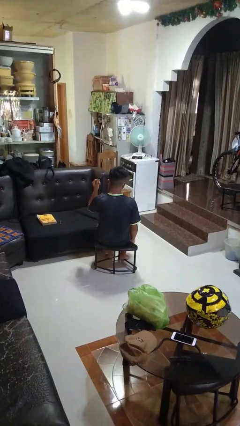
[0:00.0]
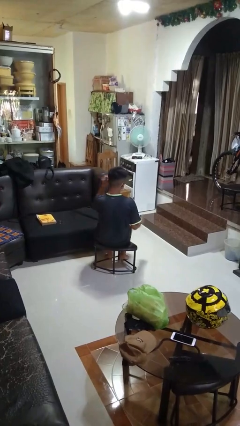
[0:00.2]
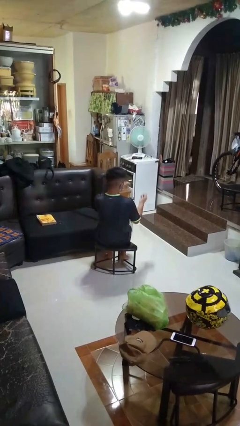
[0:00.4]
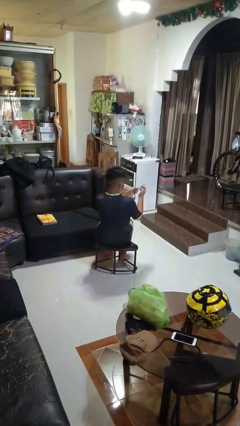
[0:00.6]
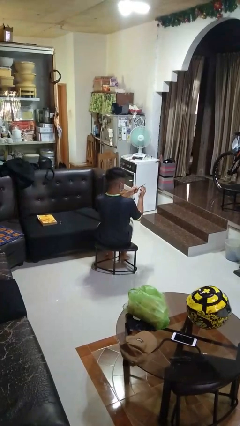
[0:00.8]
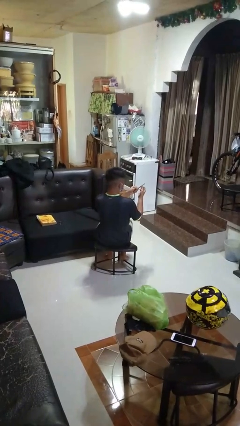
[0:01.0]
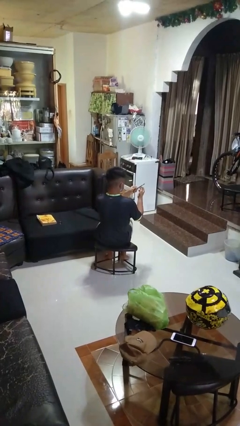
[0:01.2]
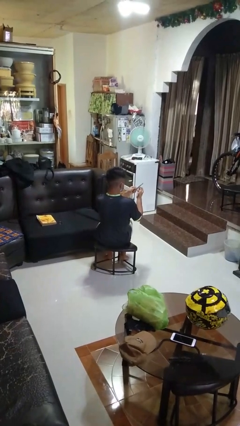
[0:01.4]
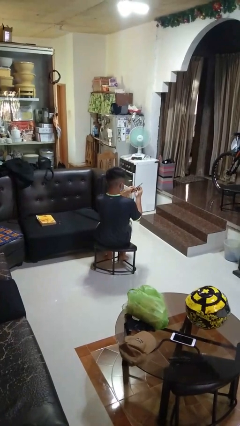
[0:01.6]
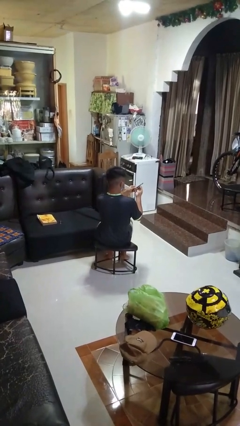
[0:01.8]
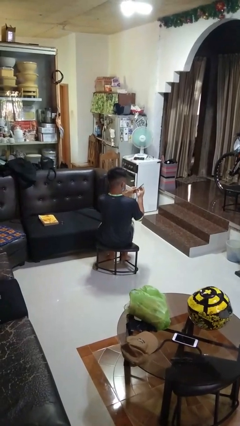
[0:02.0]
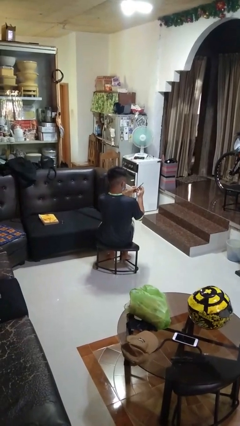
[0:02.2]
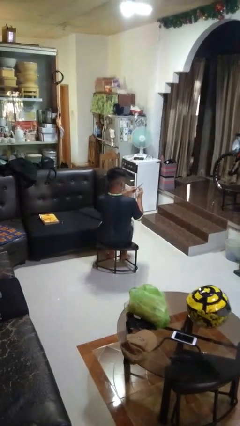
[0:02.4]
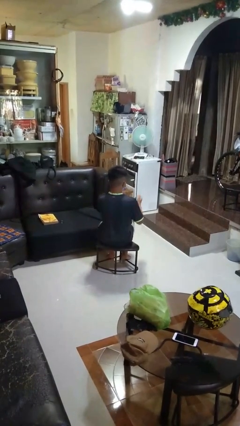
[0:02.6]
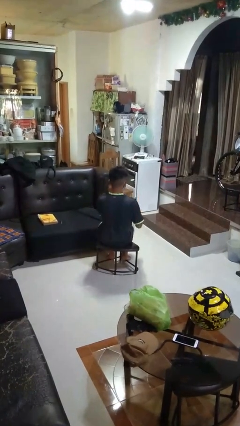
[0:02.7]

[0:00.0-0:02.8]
person files fingernails

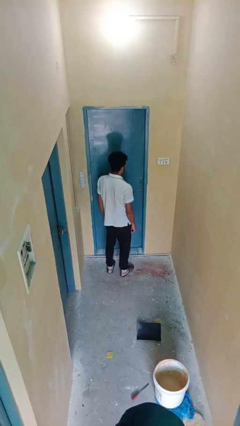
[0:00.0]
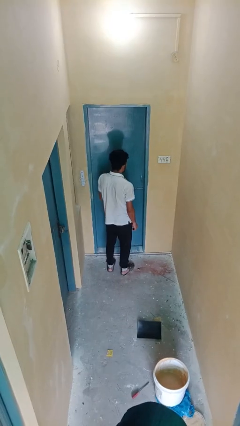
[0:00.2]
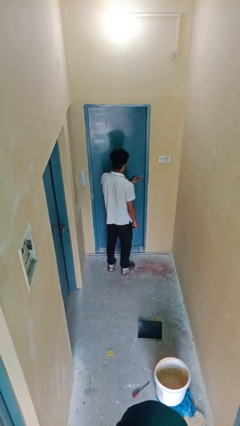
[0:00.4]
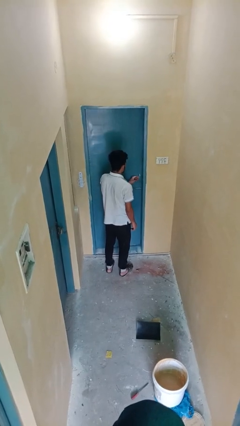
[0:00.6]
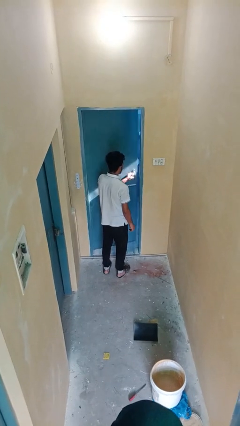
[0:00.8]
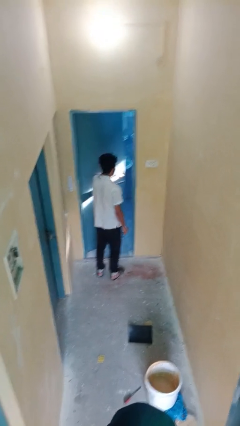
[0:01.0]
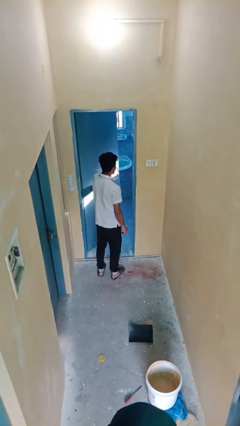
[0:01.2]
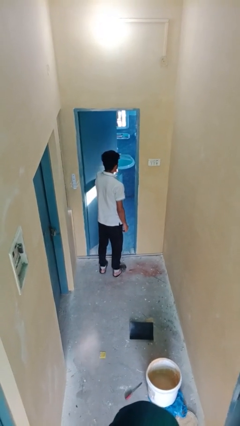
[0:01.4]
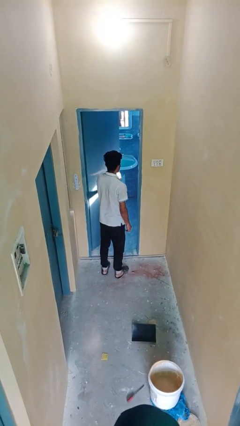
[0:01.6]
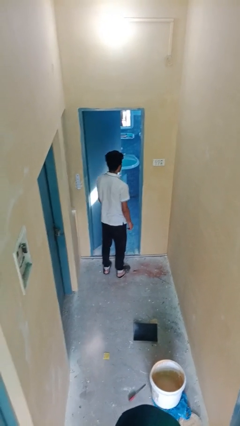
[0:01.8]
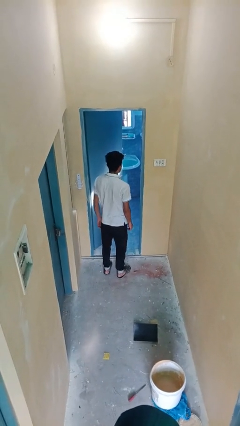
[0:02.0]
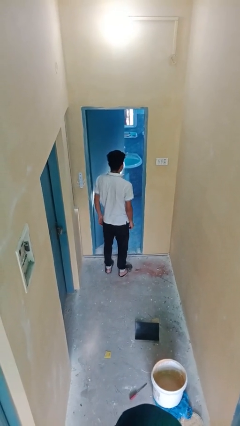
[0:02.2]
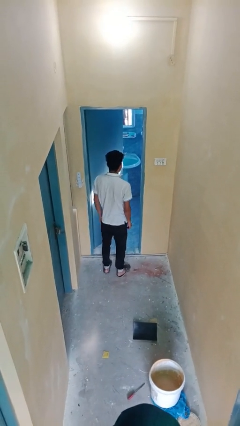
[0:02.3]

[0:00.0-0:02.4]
person opens facility door

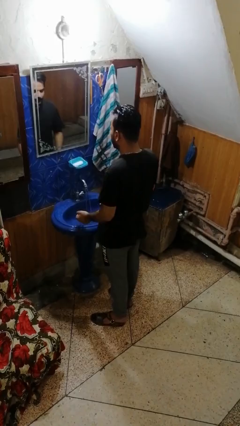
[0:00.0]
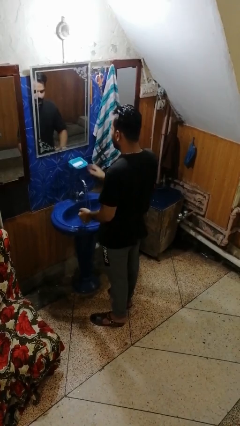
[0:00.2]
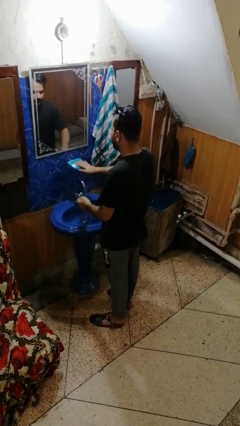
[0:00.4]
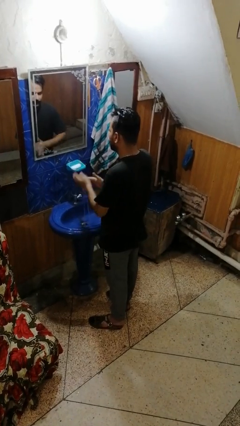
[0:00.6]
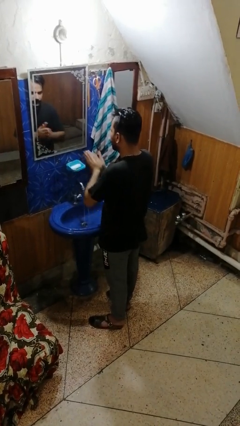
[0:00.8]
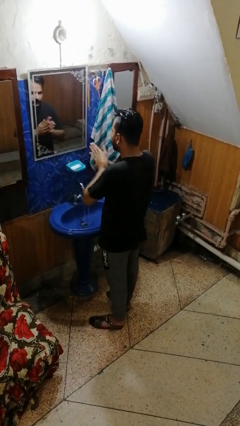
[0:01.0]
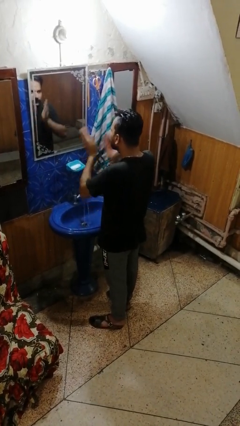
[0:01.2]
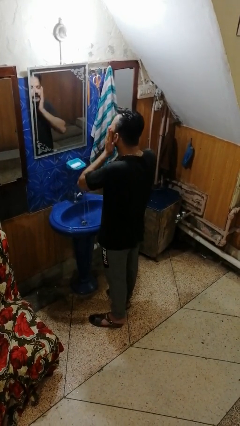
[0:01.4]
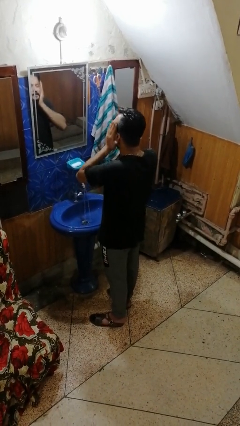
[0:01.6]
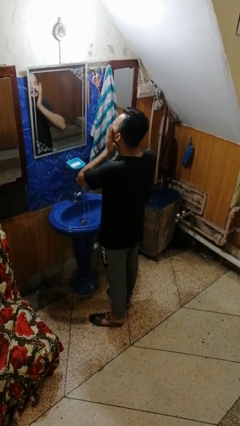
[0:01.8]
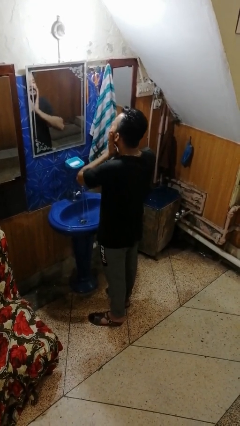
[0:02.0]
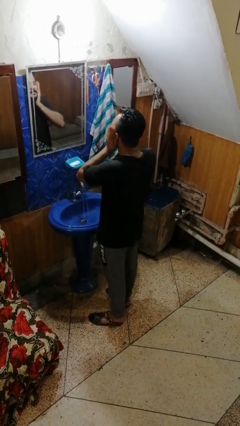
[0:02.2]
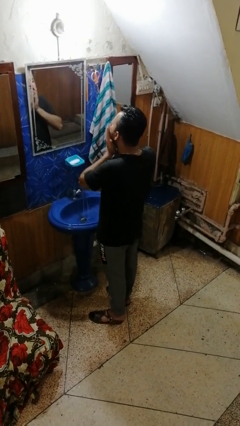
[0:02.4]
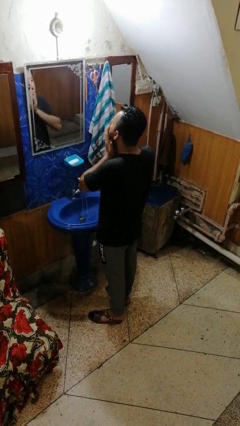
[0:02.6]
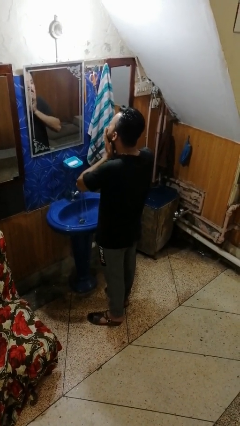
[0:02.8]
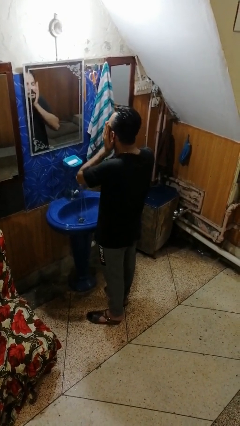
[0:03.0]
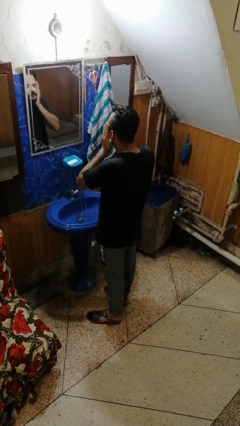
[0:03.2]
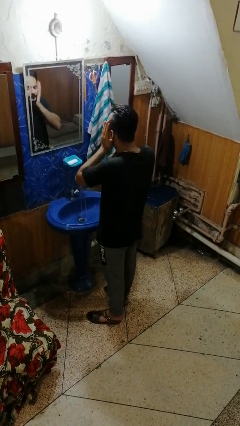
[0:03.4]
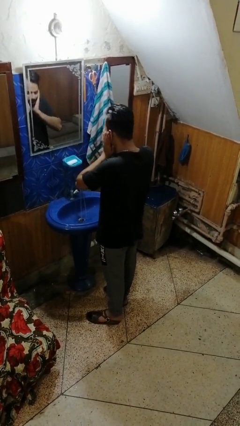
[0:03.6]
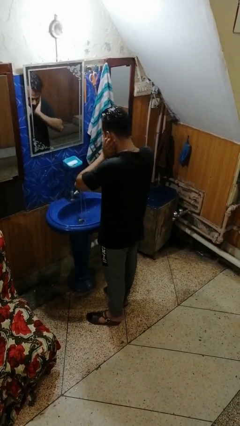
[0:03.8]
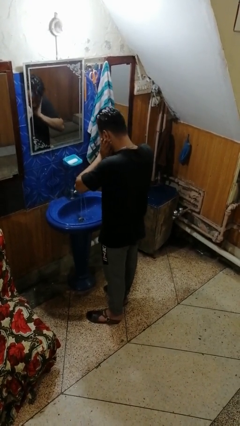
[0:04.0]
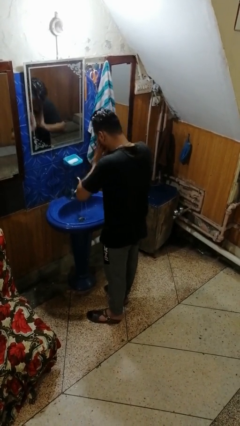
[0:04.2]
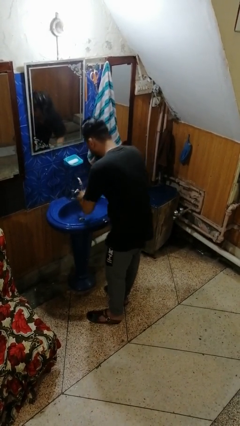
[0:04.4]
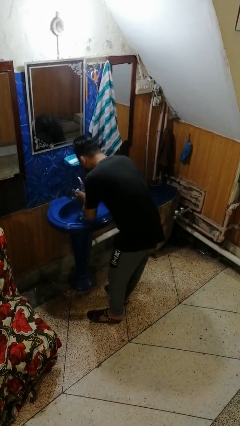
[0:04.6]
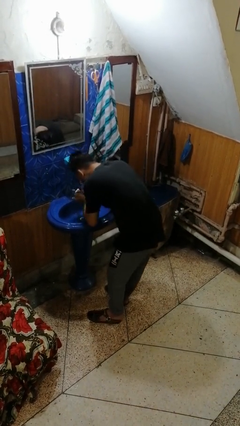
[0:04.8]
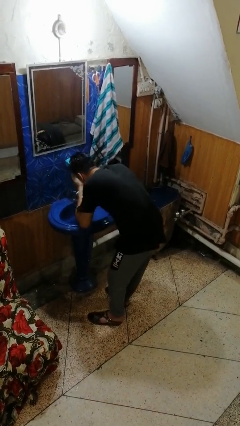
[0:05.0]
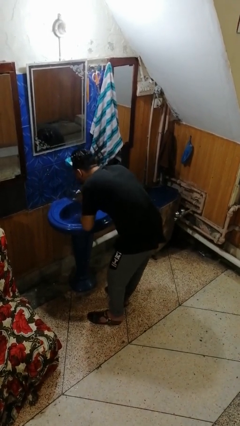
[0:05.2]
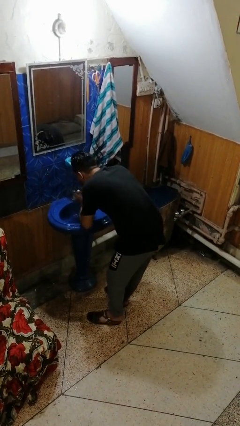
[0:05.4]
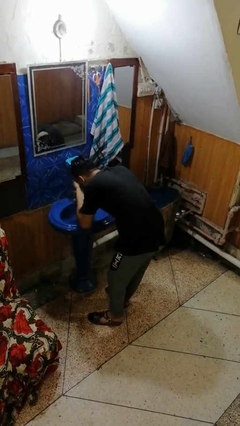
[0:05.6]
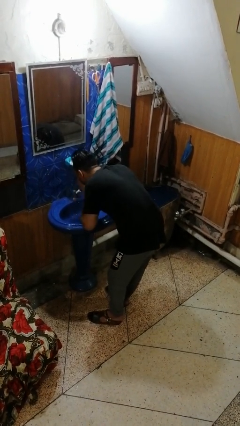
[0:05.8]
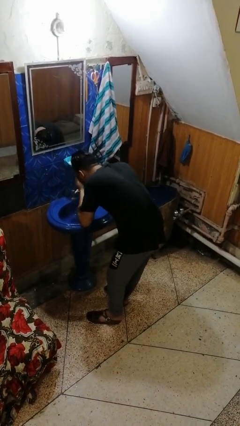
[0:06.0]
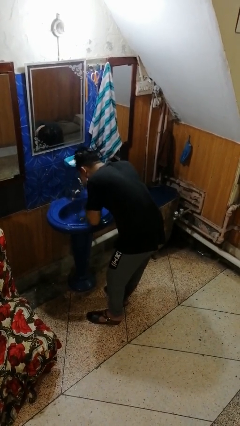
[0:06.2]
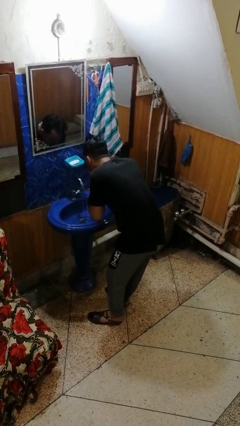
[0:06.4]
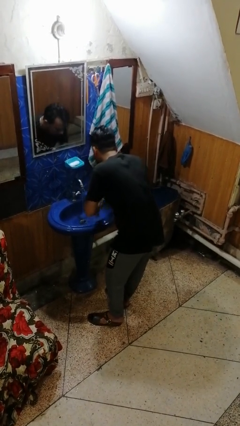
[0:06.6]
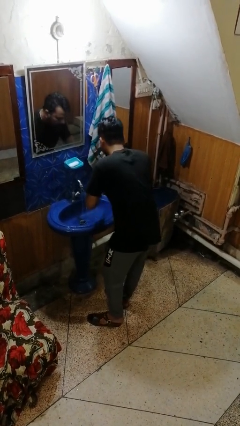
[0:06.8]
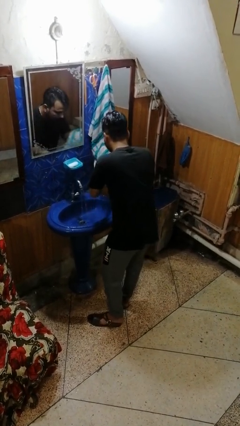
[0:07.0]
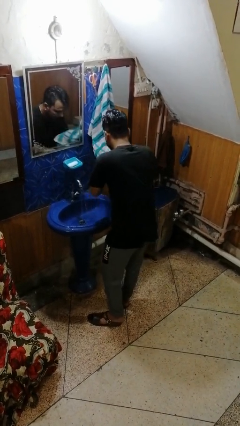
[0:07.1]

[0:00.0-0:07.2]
person washes face

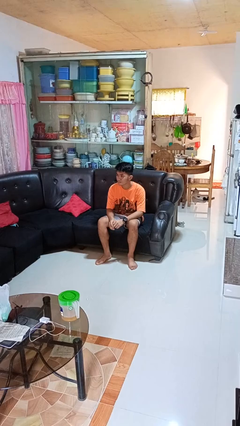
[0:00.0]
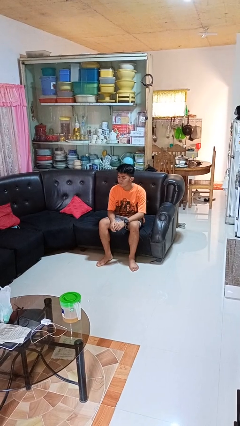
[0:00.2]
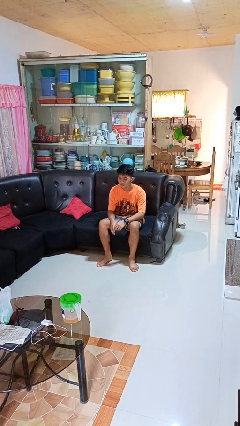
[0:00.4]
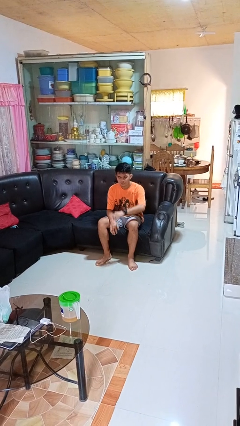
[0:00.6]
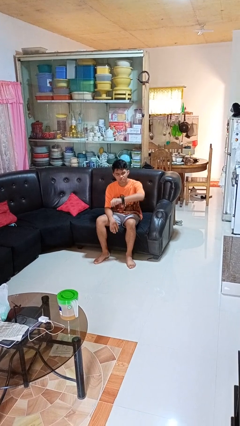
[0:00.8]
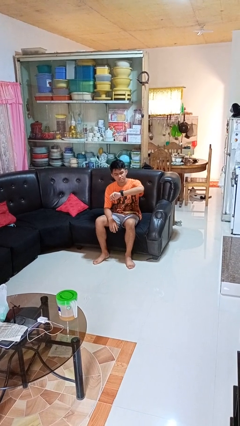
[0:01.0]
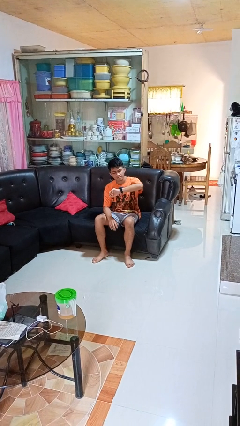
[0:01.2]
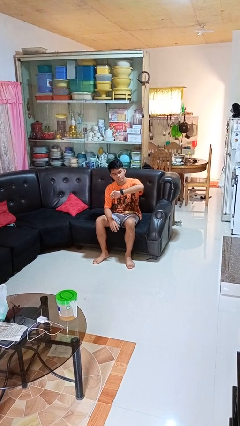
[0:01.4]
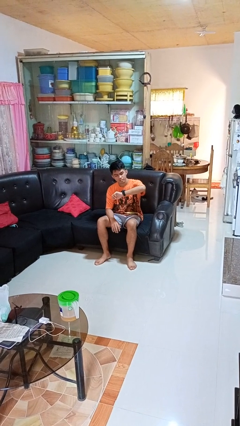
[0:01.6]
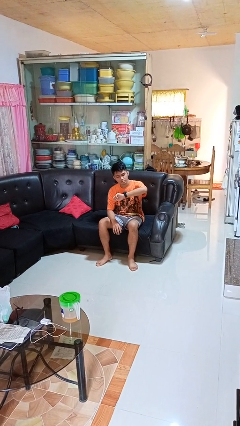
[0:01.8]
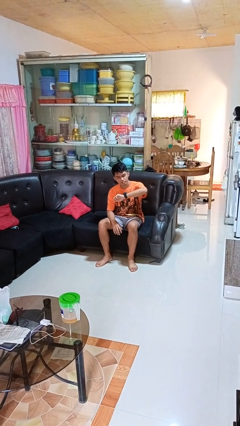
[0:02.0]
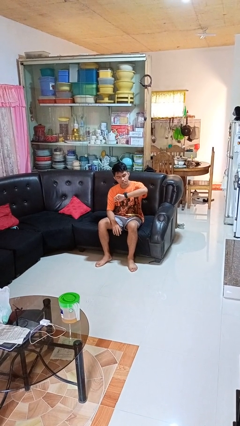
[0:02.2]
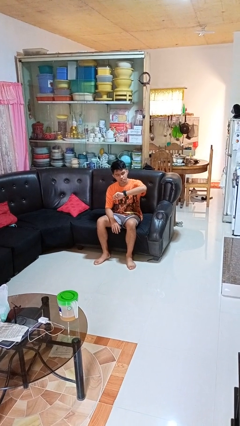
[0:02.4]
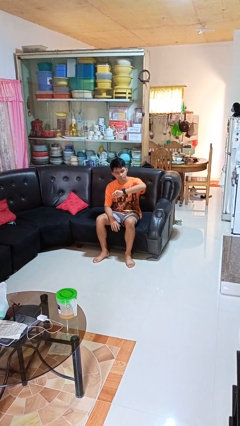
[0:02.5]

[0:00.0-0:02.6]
person looks at wristwatch

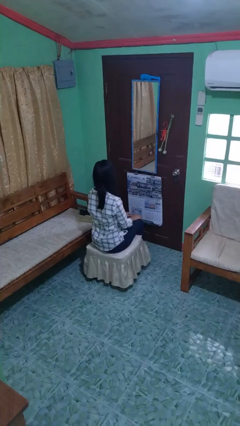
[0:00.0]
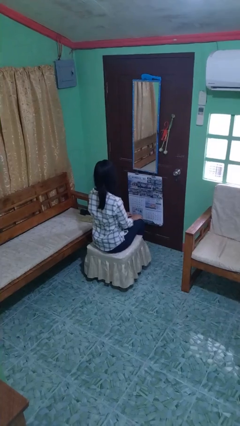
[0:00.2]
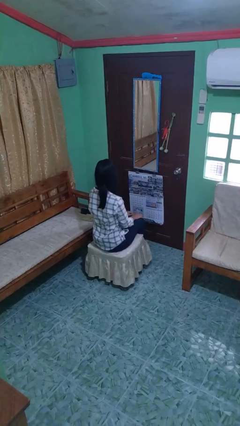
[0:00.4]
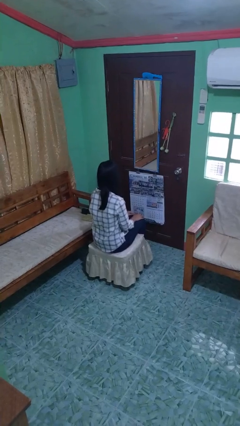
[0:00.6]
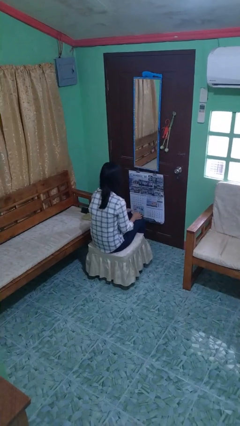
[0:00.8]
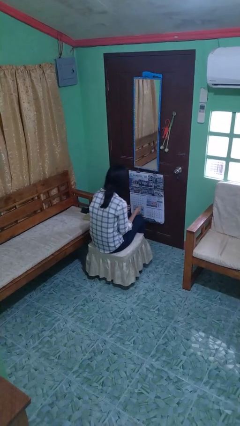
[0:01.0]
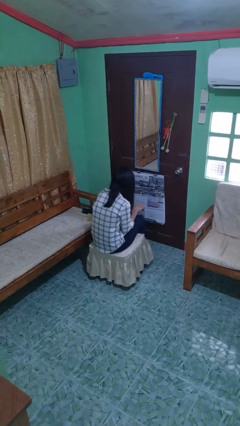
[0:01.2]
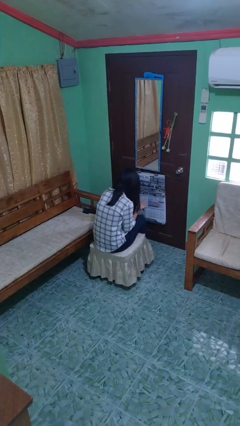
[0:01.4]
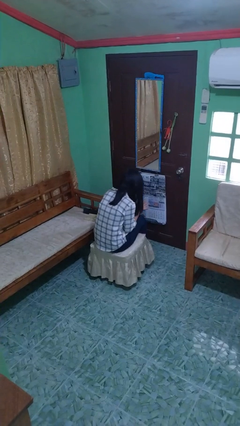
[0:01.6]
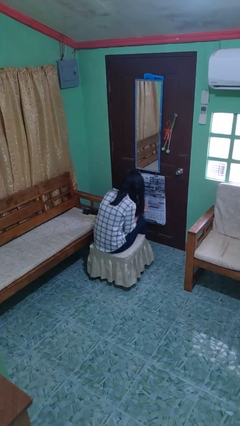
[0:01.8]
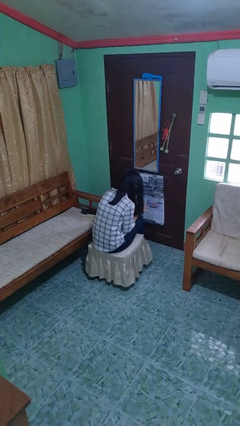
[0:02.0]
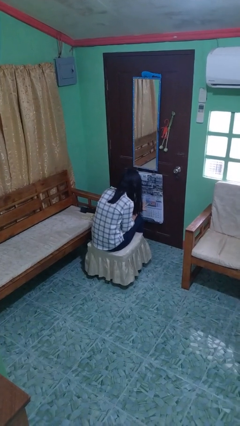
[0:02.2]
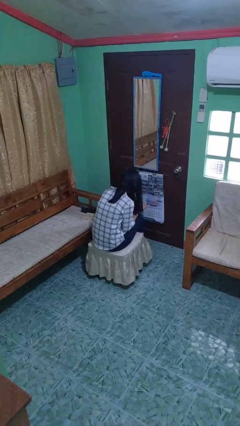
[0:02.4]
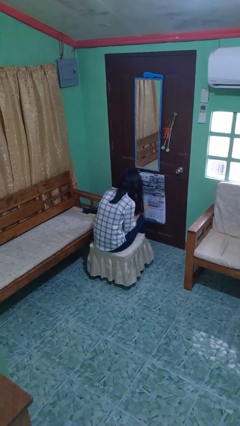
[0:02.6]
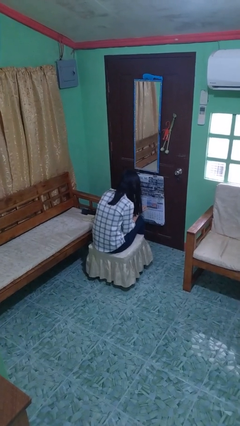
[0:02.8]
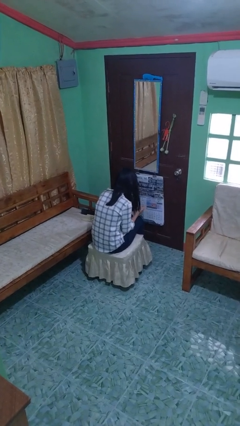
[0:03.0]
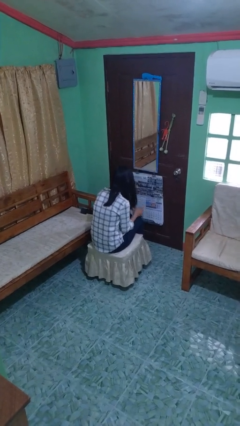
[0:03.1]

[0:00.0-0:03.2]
person looks at hands in lap
